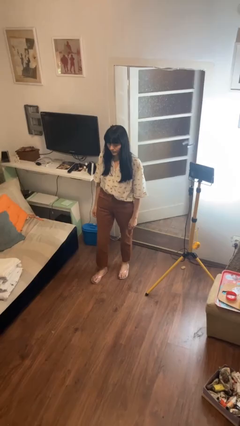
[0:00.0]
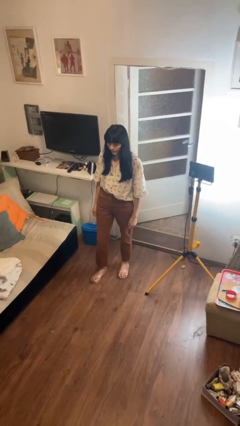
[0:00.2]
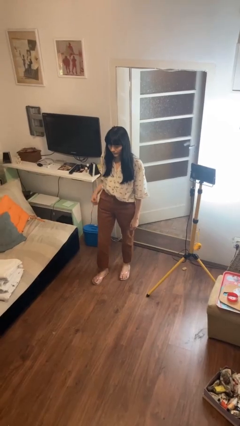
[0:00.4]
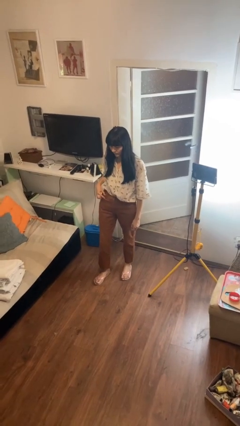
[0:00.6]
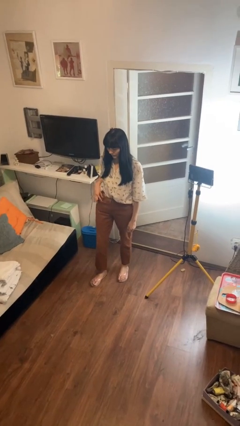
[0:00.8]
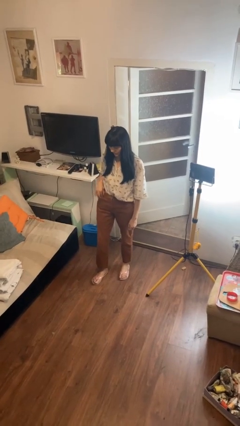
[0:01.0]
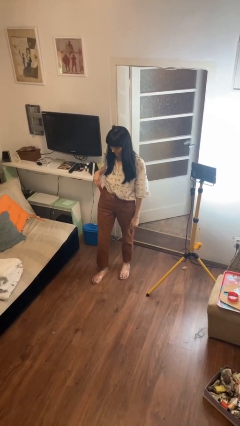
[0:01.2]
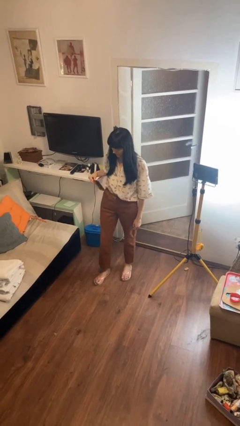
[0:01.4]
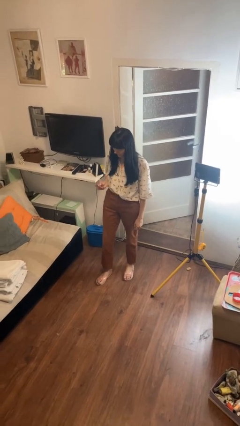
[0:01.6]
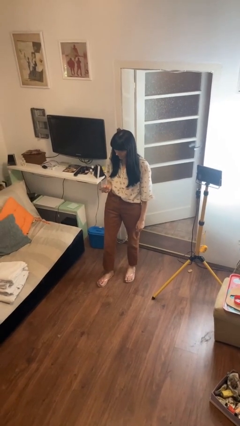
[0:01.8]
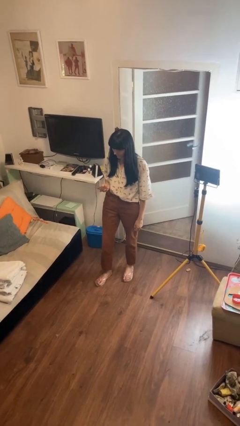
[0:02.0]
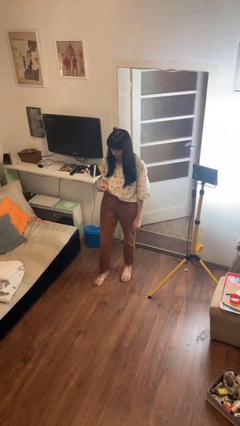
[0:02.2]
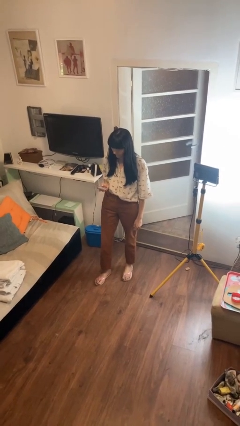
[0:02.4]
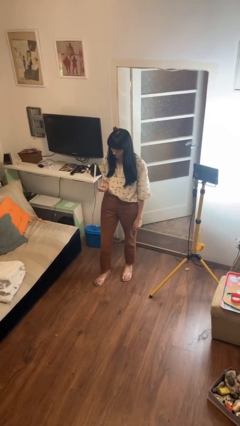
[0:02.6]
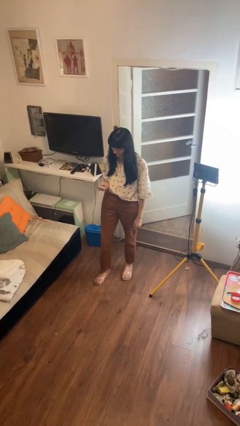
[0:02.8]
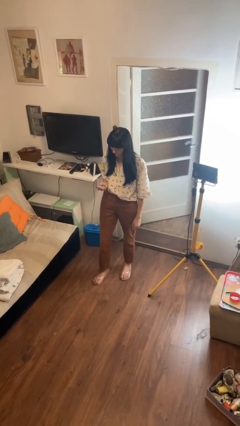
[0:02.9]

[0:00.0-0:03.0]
person takes phone from pocket

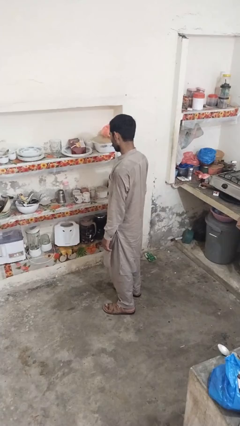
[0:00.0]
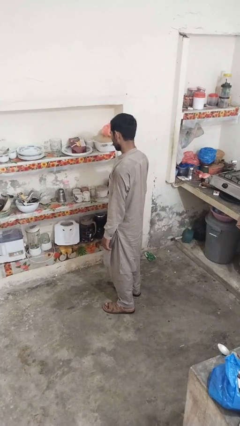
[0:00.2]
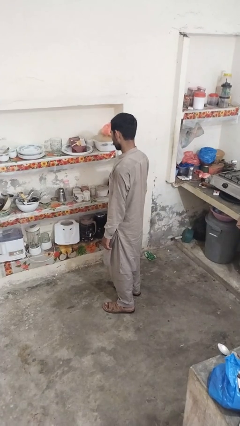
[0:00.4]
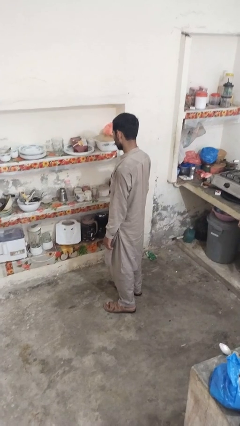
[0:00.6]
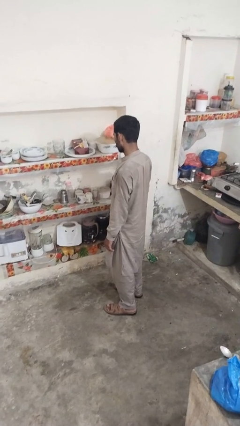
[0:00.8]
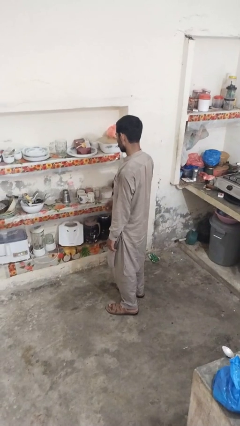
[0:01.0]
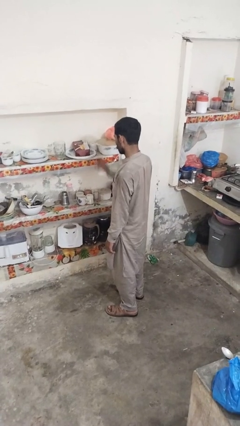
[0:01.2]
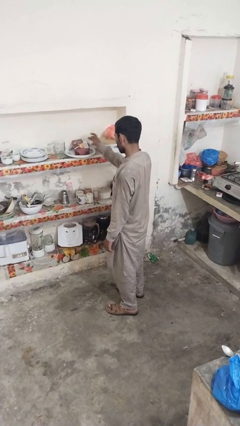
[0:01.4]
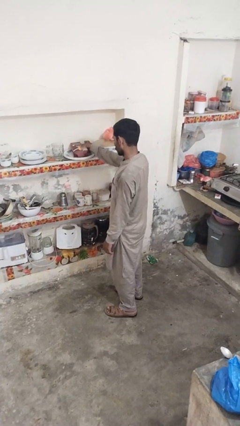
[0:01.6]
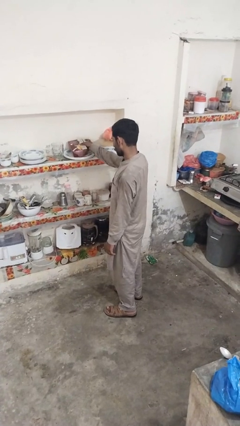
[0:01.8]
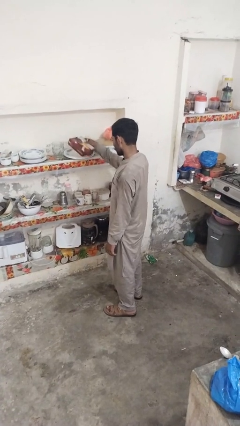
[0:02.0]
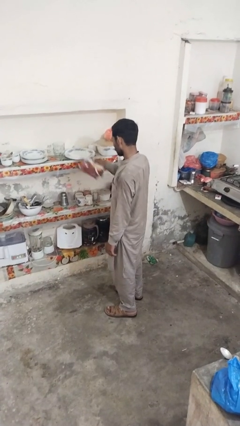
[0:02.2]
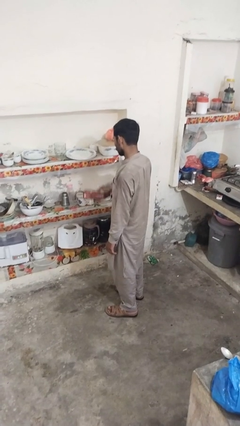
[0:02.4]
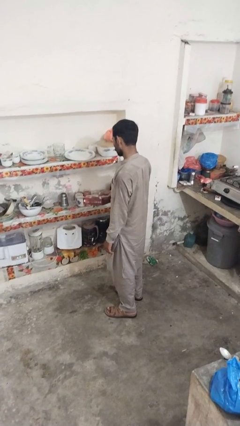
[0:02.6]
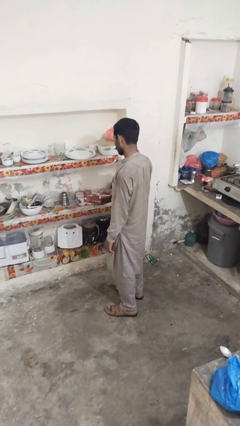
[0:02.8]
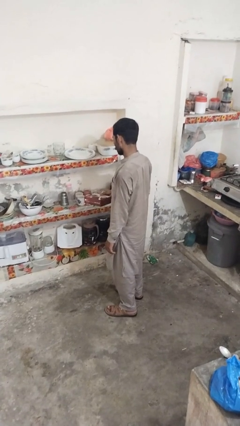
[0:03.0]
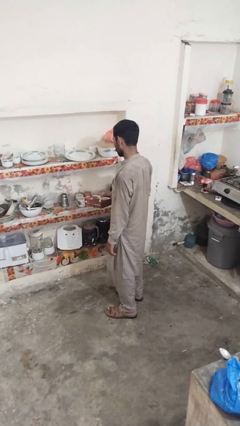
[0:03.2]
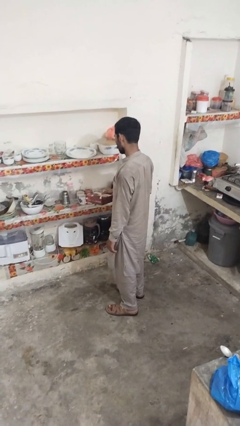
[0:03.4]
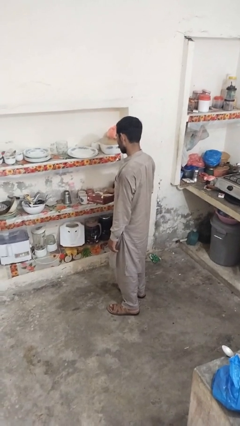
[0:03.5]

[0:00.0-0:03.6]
person picks up object from cabinet

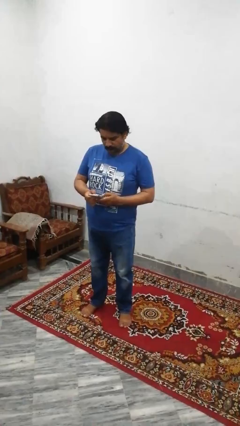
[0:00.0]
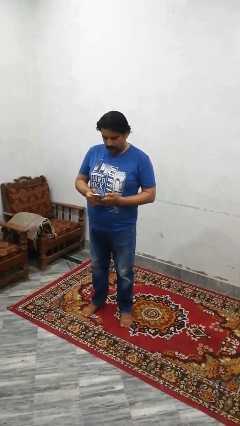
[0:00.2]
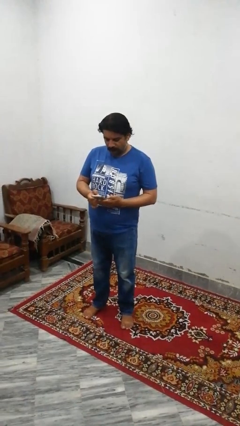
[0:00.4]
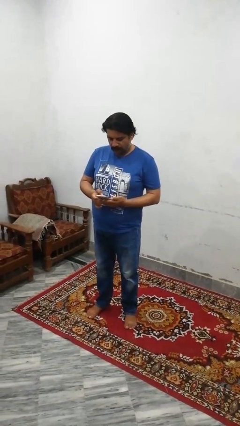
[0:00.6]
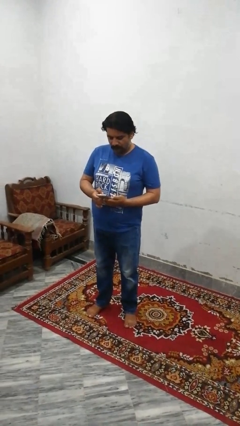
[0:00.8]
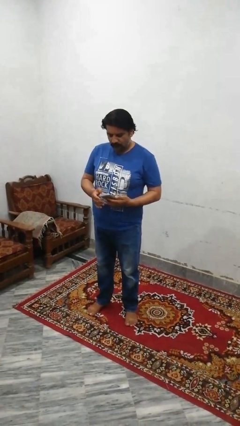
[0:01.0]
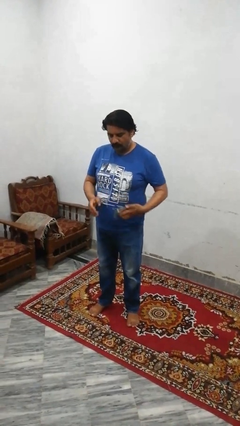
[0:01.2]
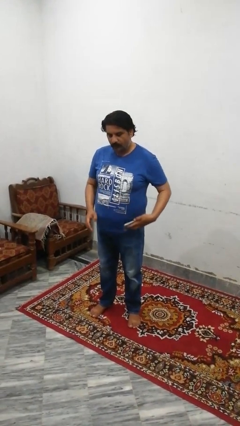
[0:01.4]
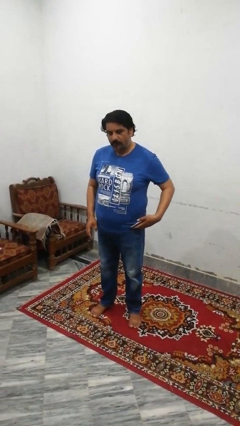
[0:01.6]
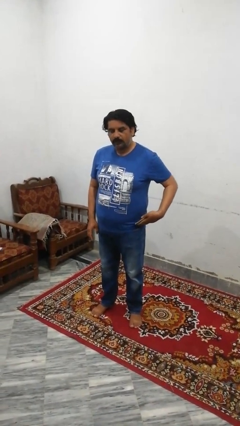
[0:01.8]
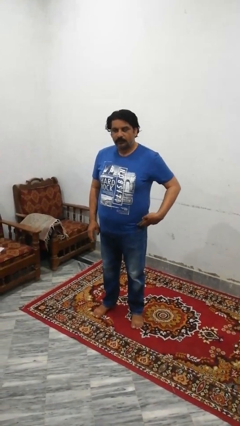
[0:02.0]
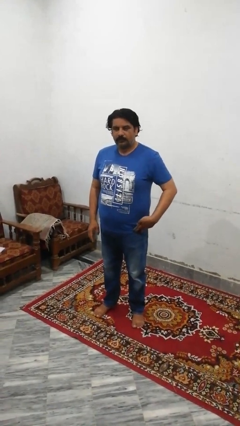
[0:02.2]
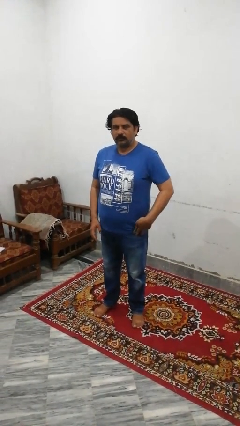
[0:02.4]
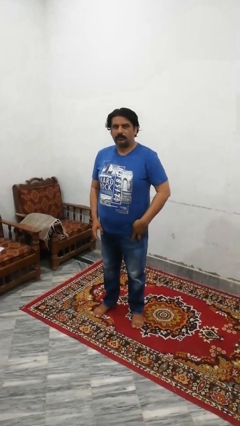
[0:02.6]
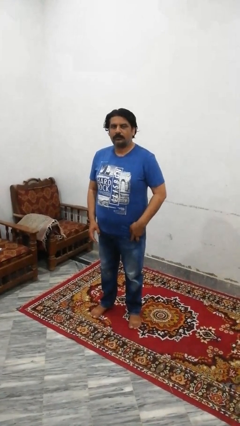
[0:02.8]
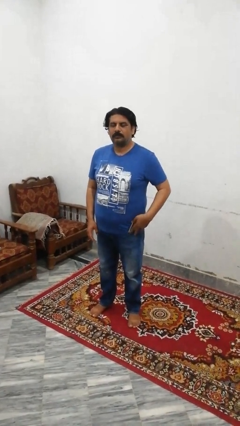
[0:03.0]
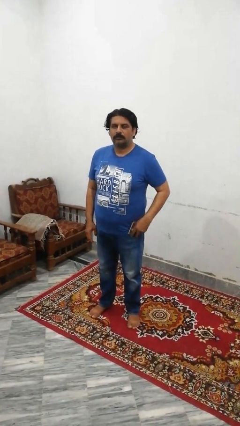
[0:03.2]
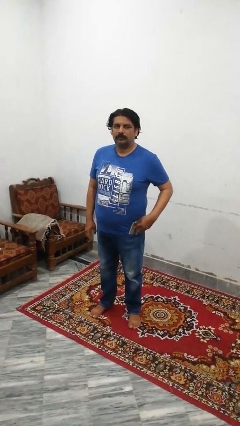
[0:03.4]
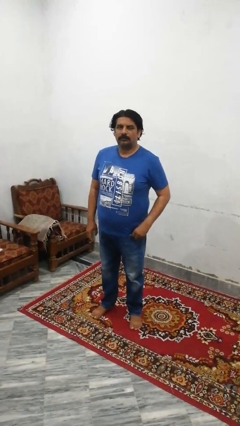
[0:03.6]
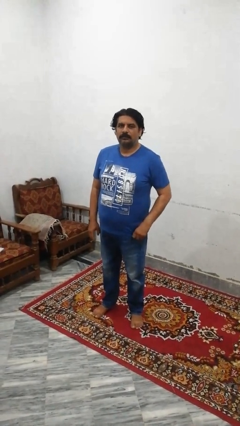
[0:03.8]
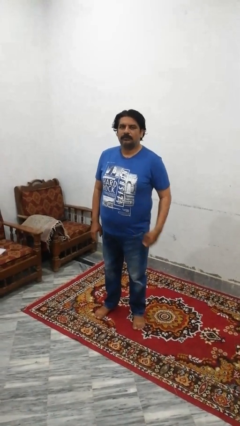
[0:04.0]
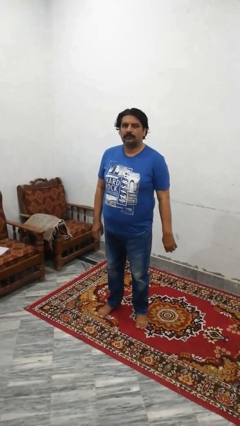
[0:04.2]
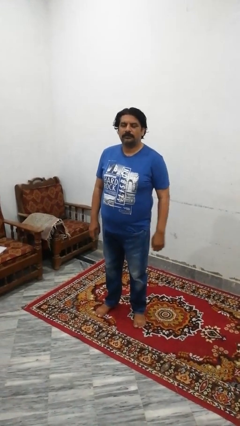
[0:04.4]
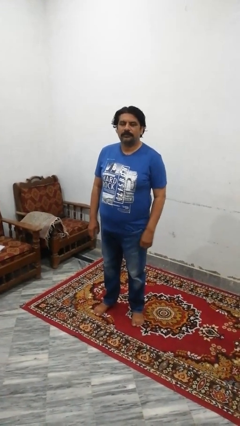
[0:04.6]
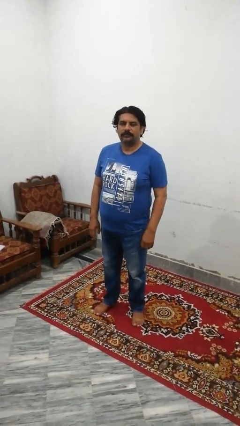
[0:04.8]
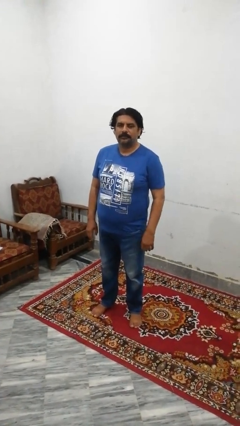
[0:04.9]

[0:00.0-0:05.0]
person puts phone into pocket

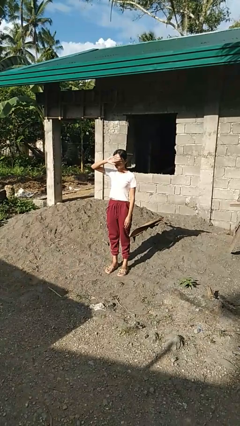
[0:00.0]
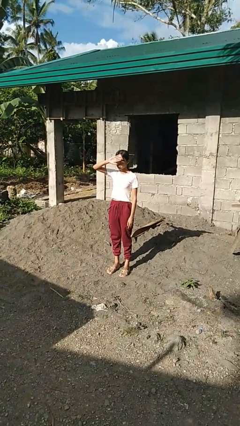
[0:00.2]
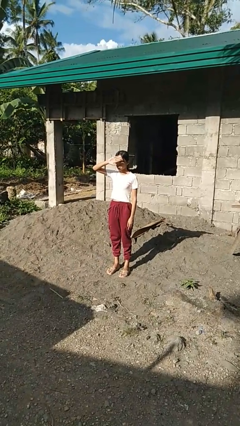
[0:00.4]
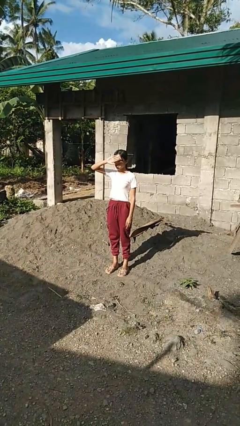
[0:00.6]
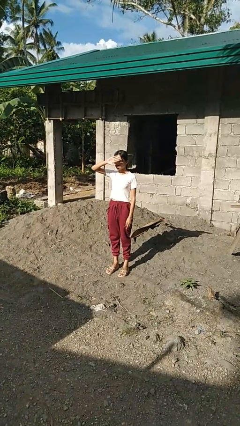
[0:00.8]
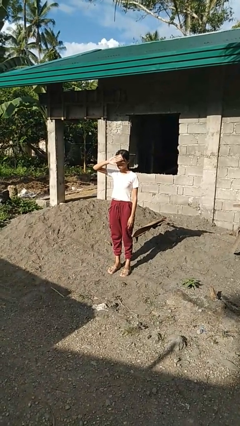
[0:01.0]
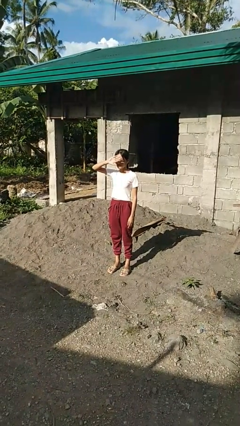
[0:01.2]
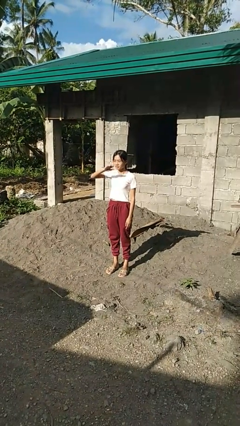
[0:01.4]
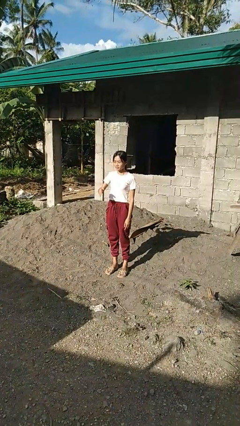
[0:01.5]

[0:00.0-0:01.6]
person shades eyes

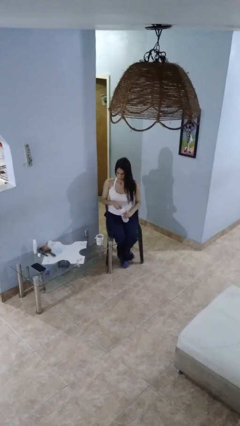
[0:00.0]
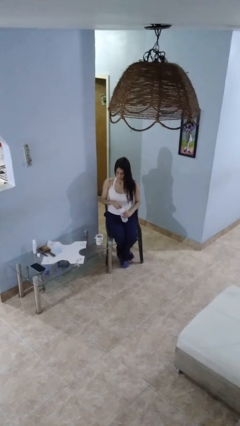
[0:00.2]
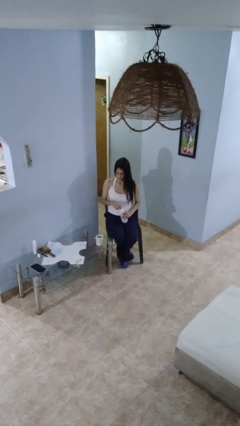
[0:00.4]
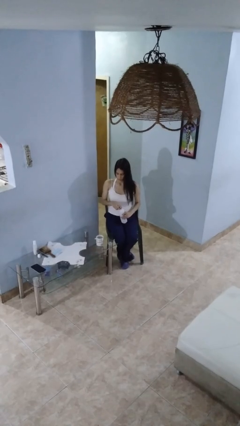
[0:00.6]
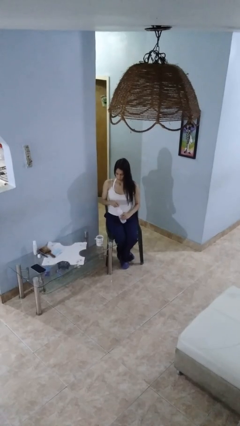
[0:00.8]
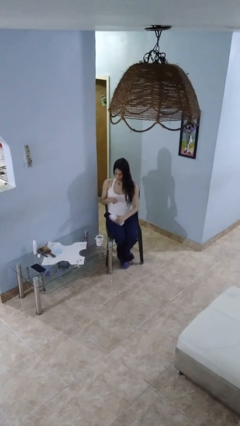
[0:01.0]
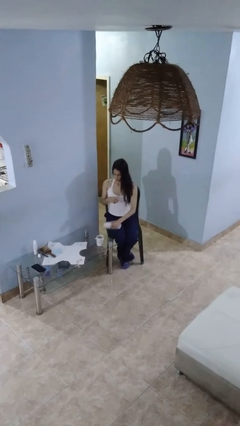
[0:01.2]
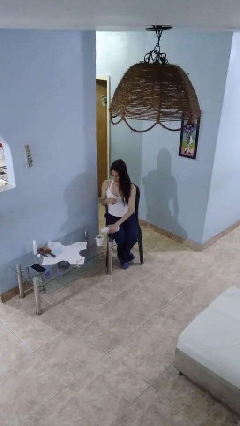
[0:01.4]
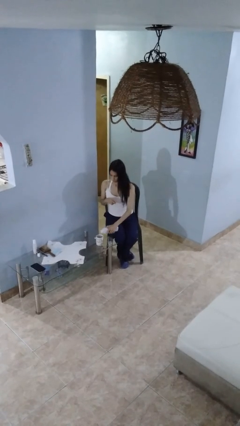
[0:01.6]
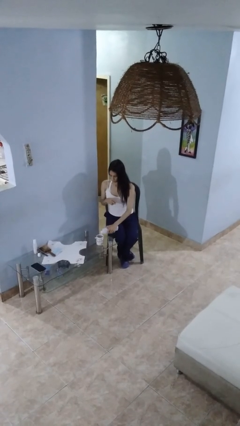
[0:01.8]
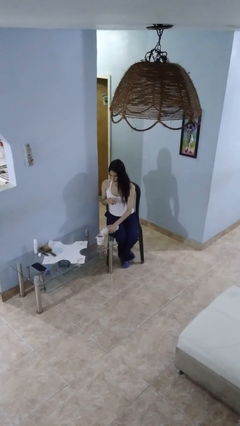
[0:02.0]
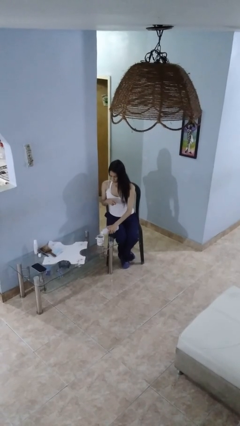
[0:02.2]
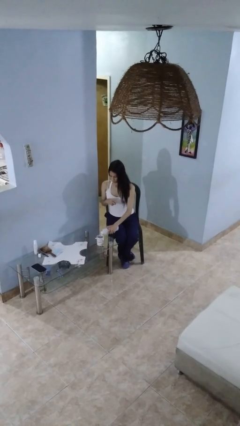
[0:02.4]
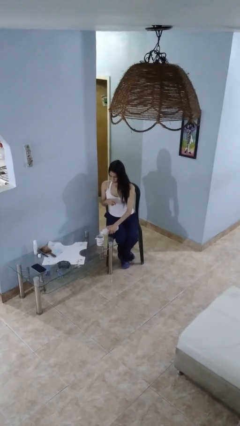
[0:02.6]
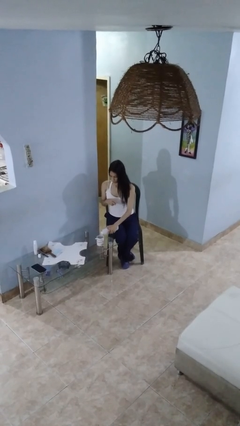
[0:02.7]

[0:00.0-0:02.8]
person pours liquid into cup

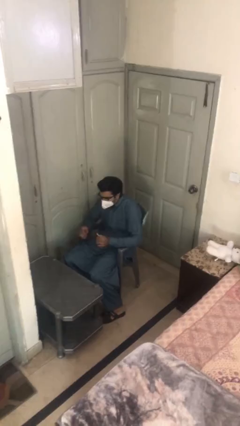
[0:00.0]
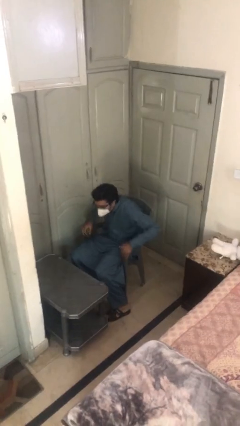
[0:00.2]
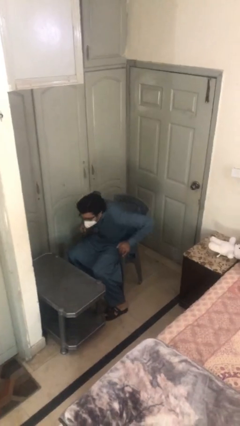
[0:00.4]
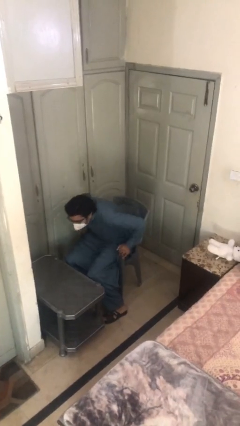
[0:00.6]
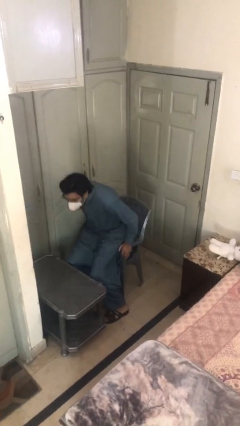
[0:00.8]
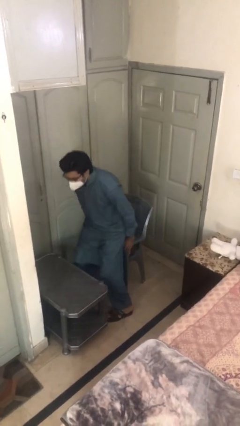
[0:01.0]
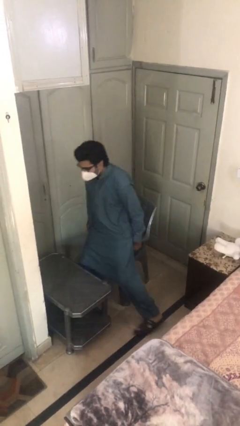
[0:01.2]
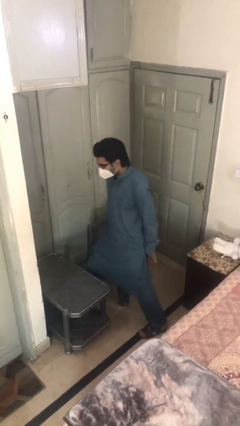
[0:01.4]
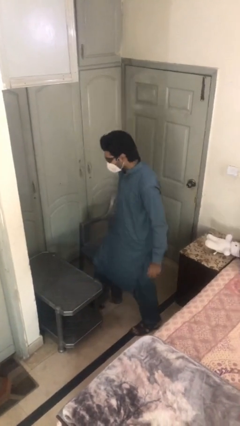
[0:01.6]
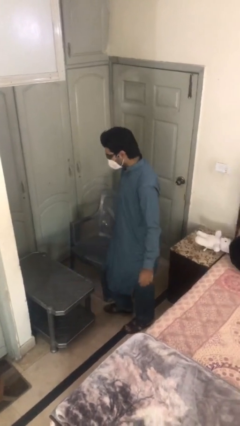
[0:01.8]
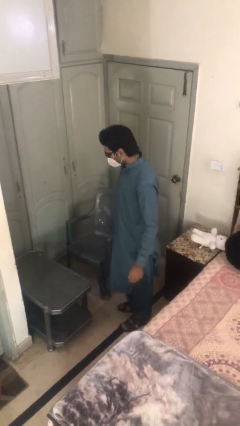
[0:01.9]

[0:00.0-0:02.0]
person stands up
